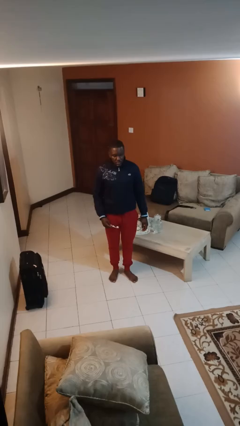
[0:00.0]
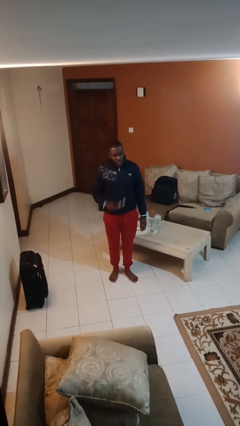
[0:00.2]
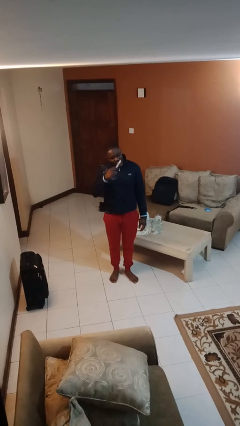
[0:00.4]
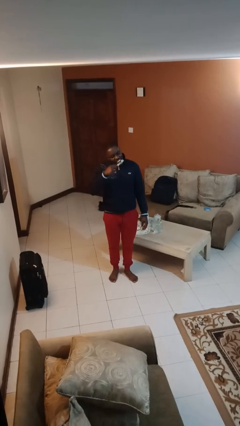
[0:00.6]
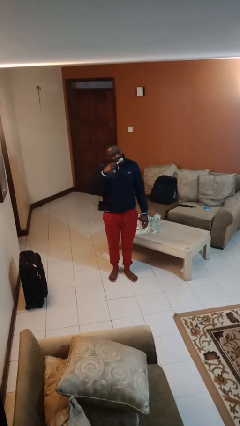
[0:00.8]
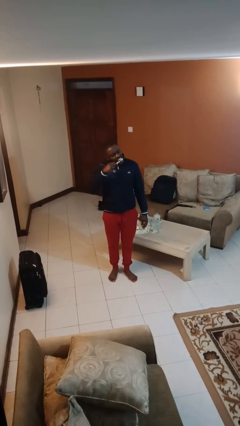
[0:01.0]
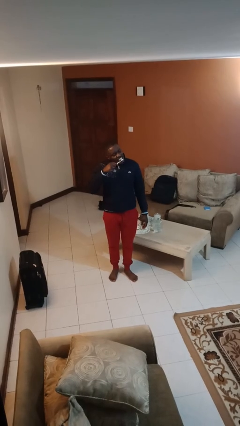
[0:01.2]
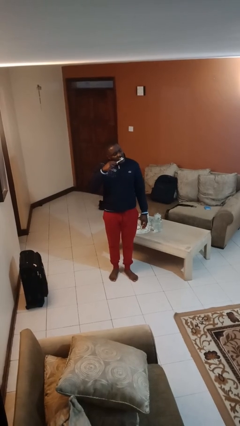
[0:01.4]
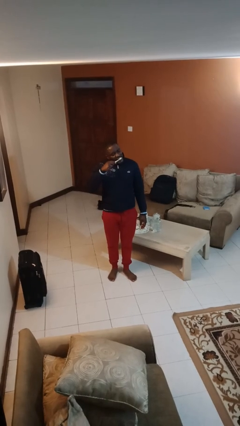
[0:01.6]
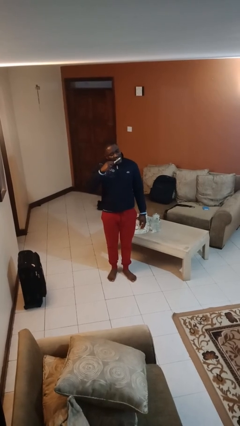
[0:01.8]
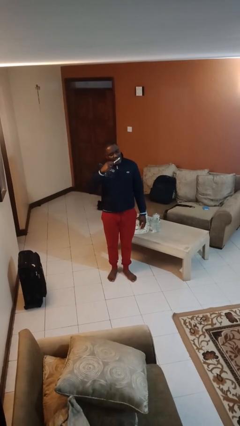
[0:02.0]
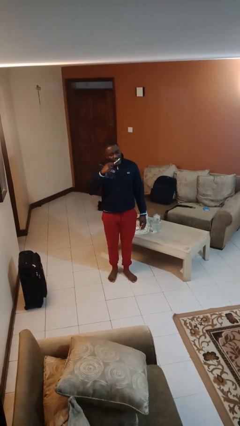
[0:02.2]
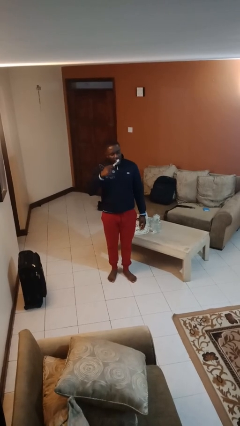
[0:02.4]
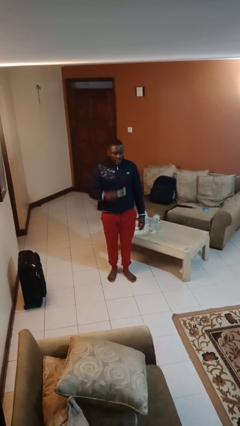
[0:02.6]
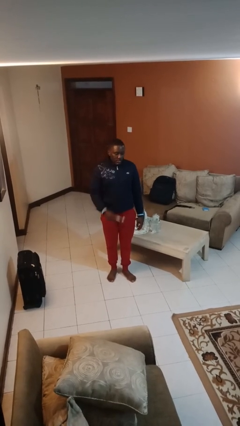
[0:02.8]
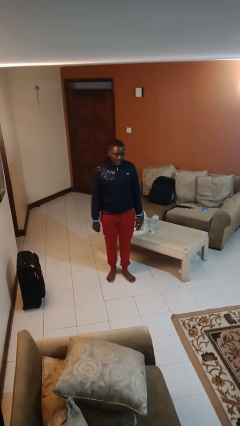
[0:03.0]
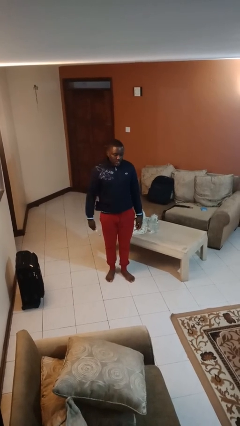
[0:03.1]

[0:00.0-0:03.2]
person brushes teeth

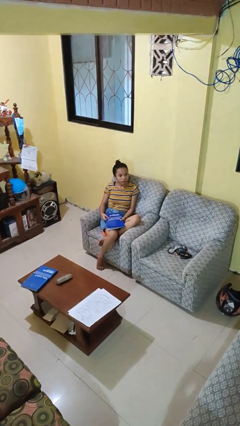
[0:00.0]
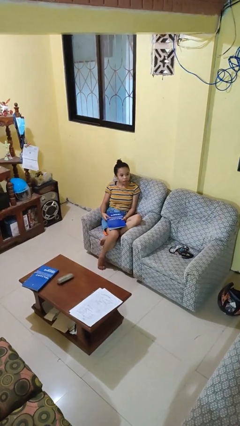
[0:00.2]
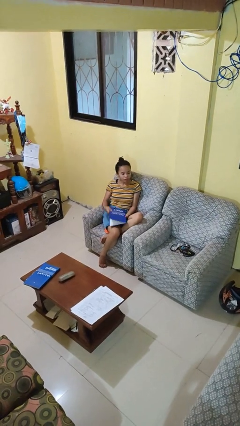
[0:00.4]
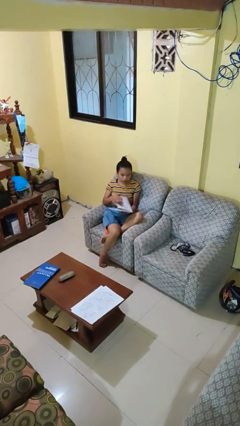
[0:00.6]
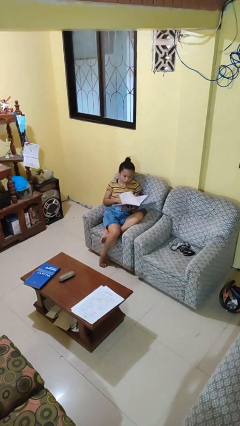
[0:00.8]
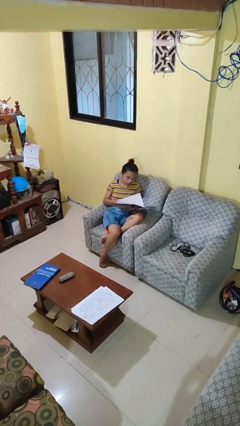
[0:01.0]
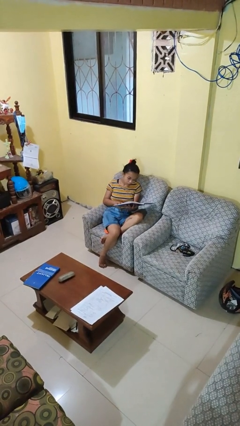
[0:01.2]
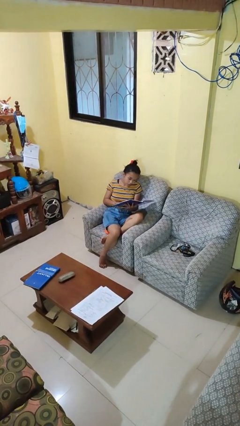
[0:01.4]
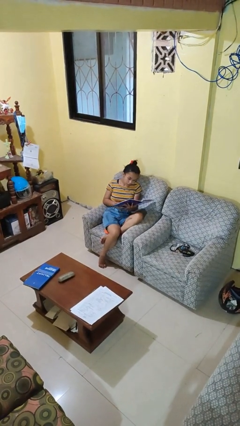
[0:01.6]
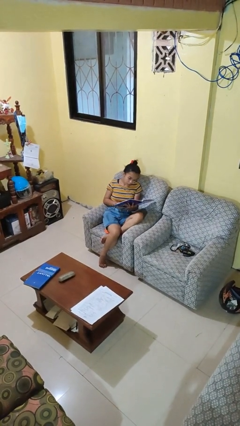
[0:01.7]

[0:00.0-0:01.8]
person reads book

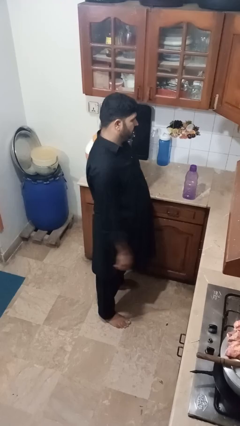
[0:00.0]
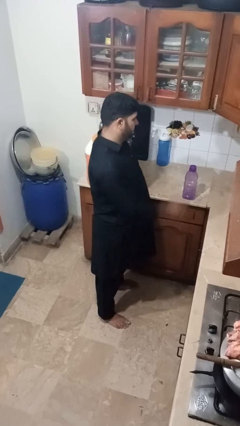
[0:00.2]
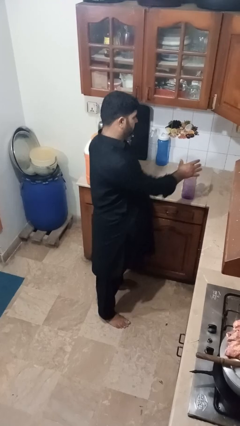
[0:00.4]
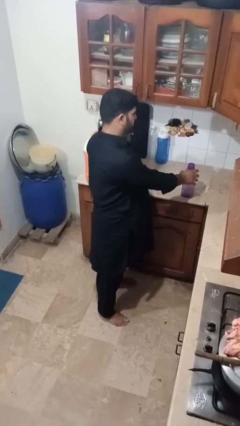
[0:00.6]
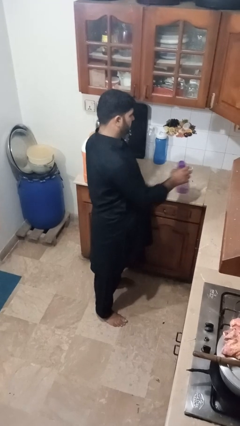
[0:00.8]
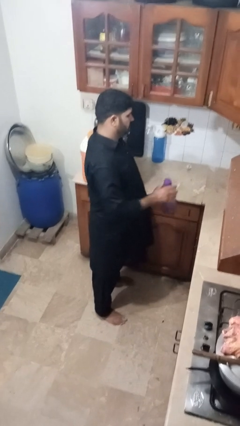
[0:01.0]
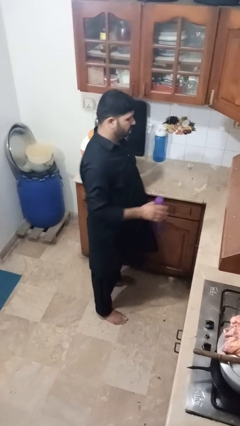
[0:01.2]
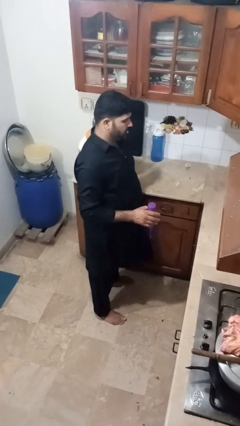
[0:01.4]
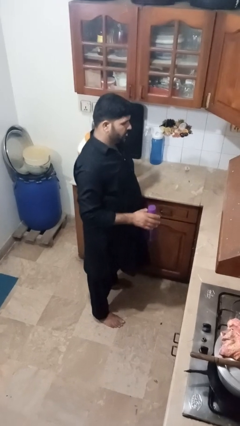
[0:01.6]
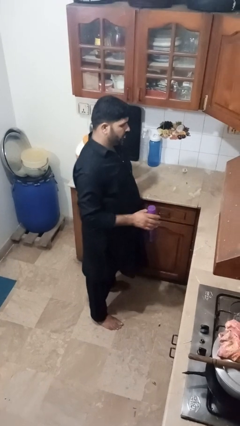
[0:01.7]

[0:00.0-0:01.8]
person picks up object from countertop

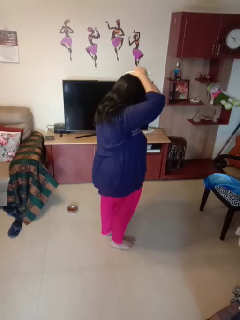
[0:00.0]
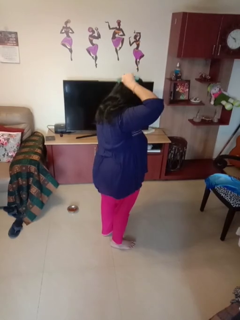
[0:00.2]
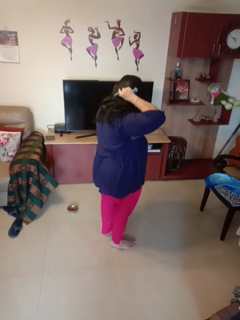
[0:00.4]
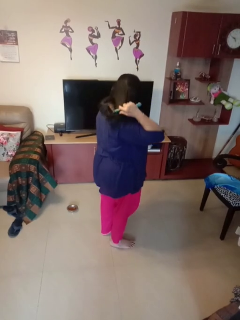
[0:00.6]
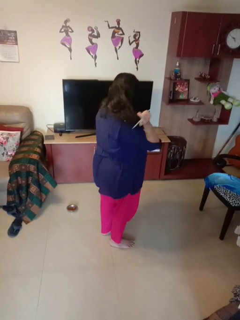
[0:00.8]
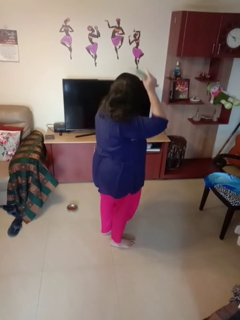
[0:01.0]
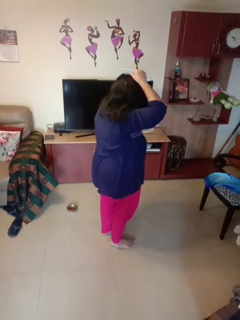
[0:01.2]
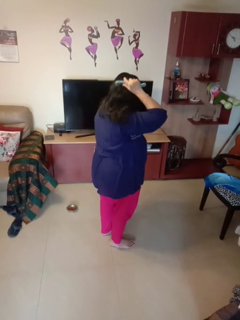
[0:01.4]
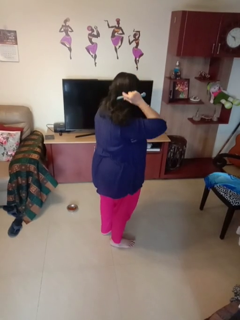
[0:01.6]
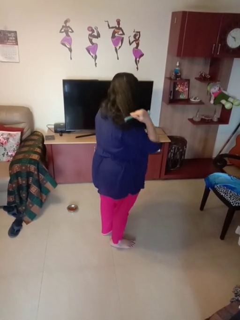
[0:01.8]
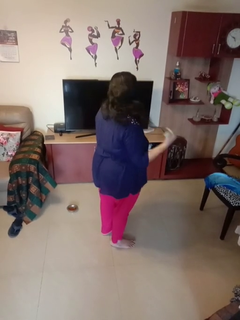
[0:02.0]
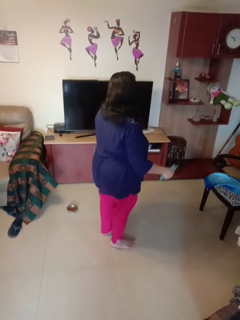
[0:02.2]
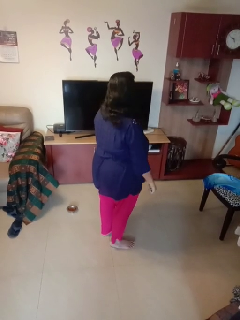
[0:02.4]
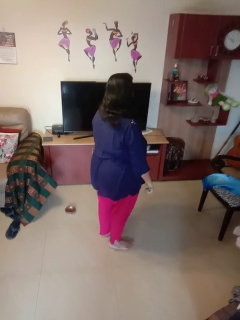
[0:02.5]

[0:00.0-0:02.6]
person brushes hair

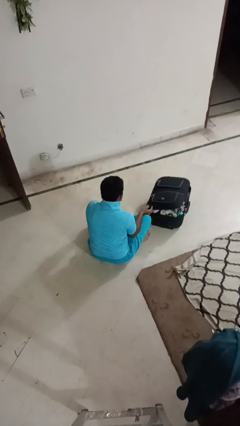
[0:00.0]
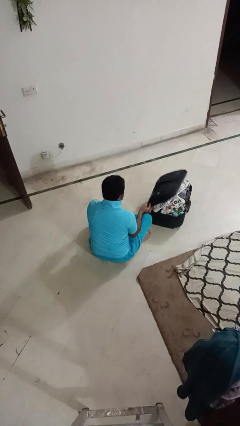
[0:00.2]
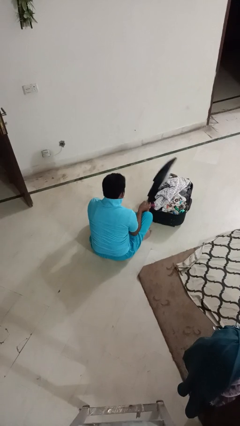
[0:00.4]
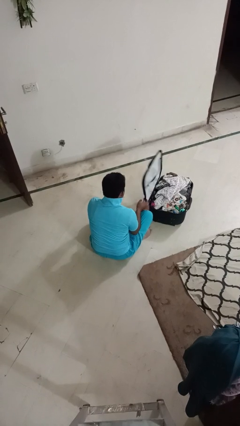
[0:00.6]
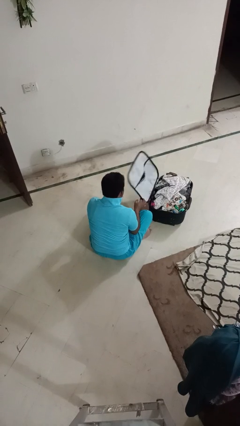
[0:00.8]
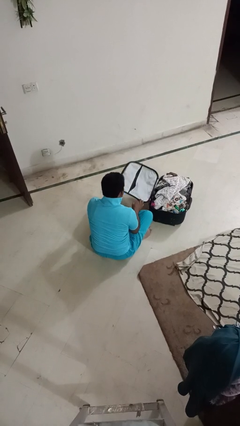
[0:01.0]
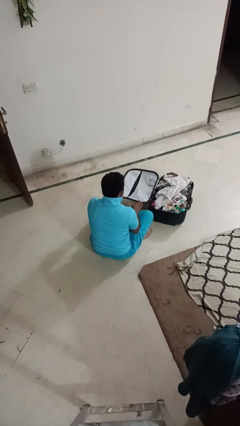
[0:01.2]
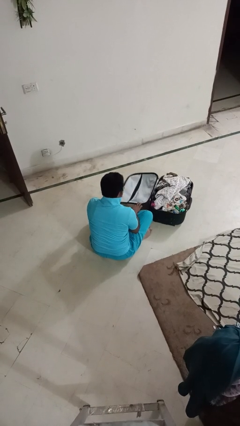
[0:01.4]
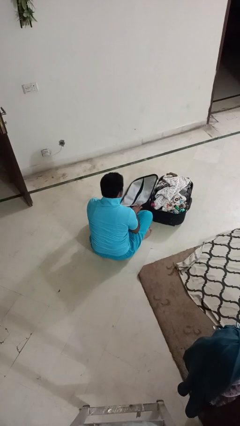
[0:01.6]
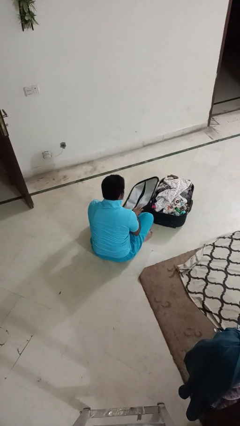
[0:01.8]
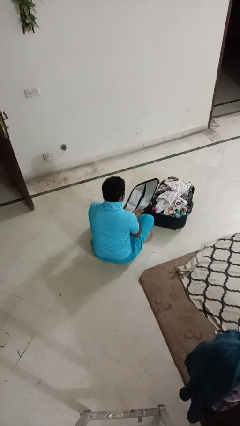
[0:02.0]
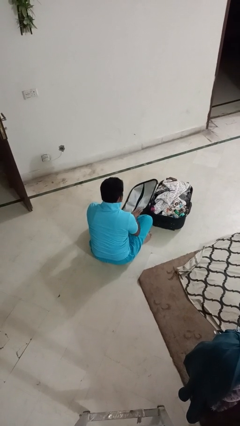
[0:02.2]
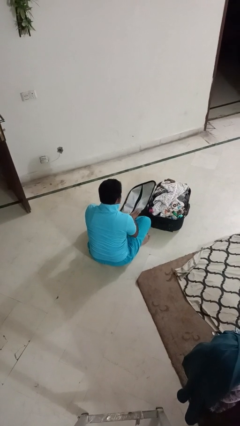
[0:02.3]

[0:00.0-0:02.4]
person opens suitcase

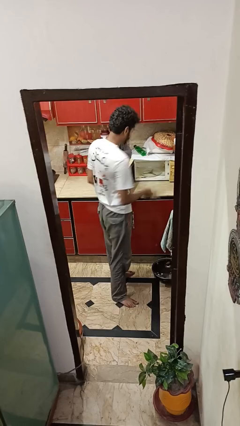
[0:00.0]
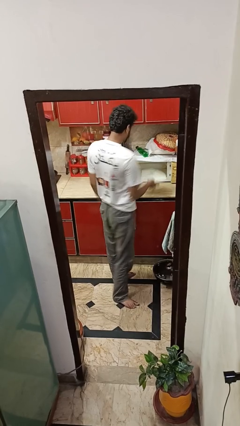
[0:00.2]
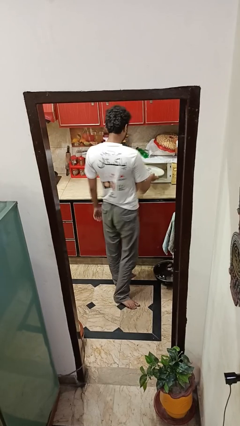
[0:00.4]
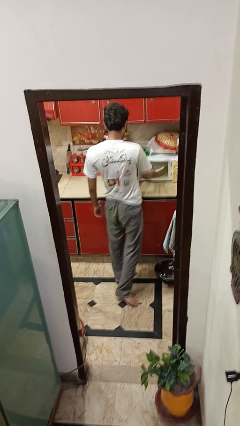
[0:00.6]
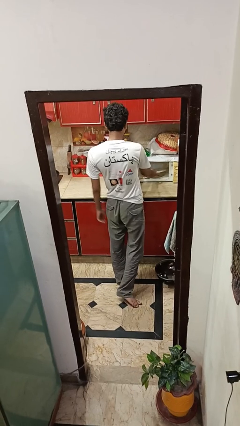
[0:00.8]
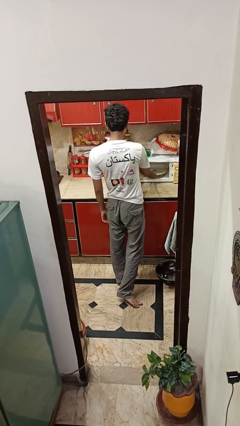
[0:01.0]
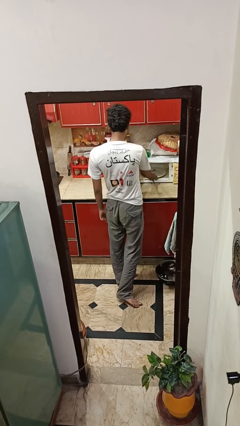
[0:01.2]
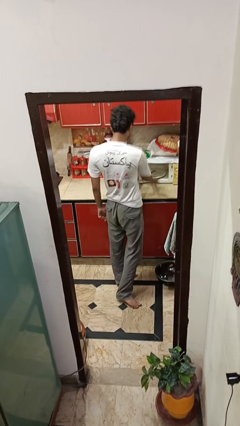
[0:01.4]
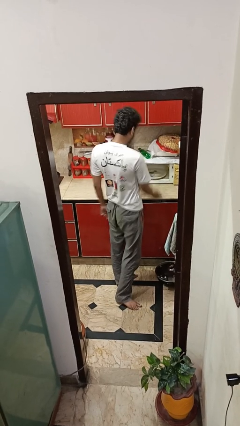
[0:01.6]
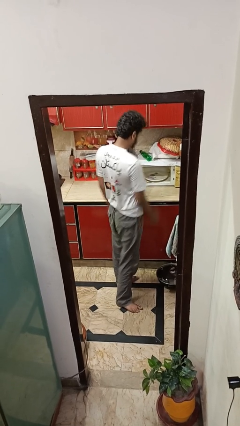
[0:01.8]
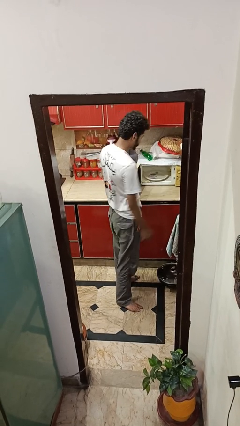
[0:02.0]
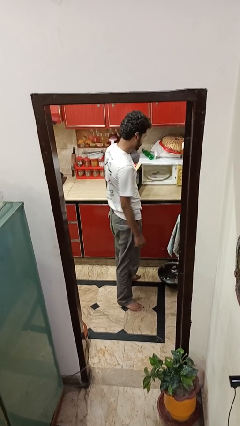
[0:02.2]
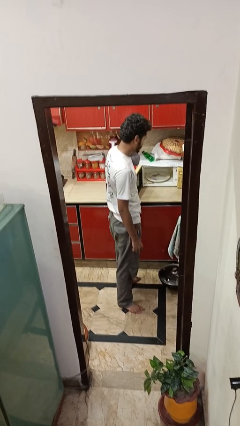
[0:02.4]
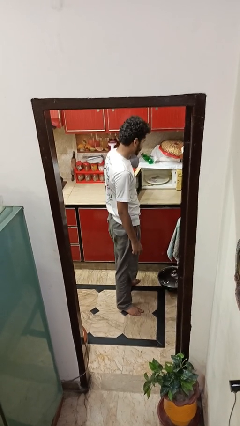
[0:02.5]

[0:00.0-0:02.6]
person puts object into oven

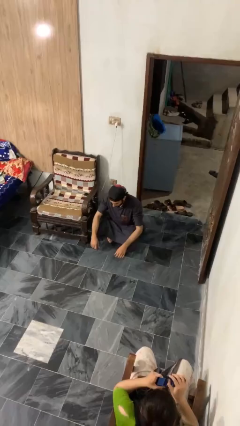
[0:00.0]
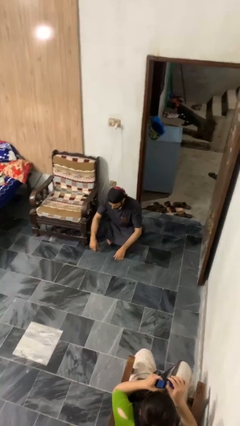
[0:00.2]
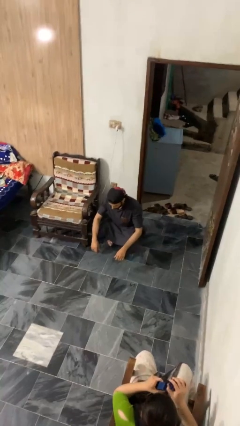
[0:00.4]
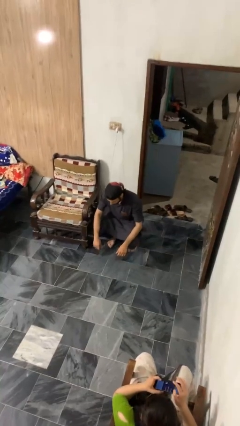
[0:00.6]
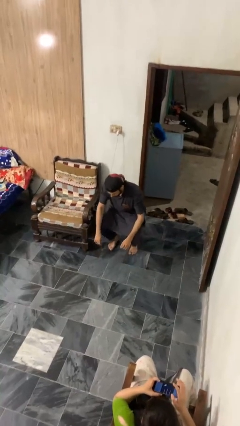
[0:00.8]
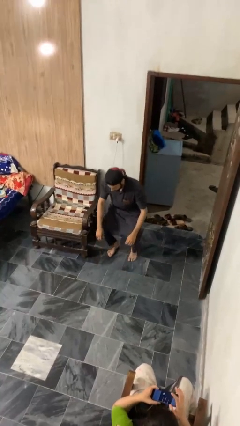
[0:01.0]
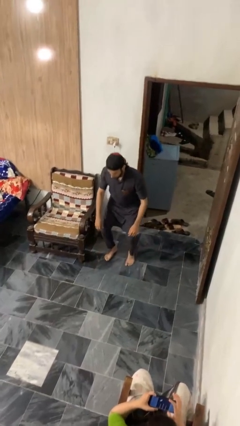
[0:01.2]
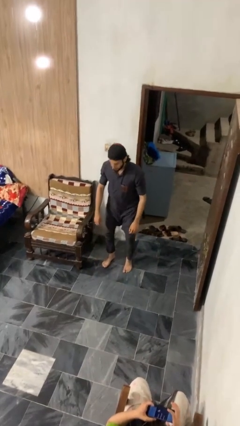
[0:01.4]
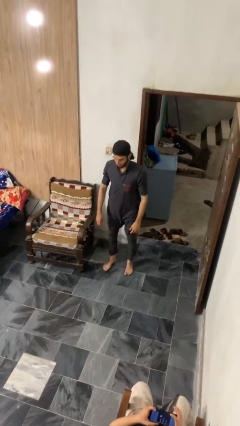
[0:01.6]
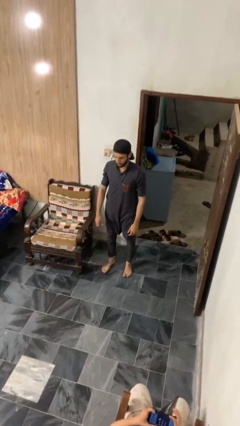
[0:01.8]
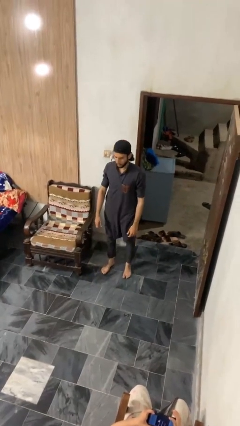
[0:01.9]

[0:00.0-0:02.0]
person stands up

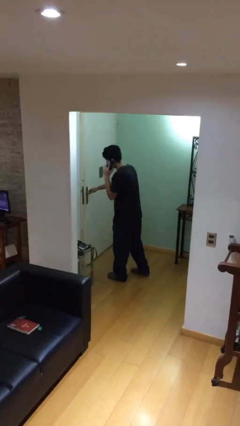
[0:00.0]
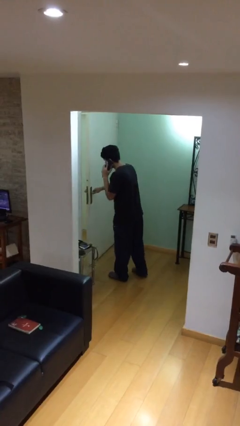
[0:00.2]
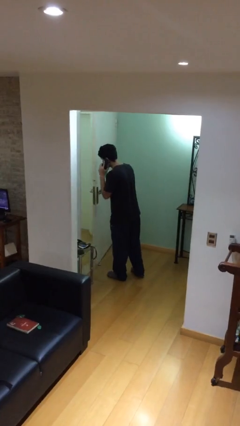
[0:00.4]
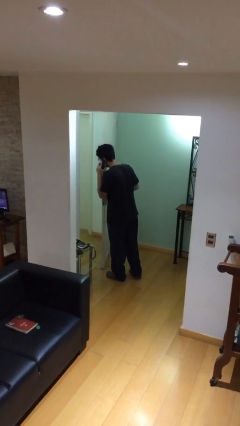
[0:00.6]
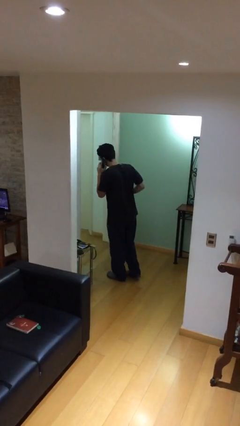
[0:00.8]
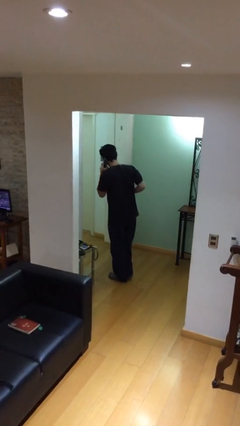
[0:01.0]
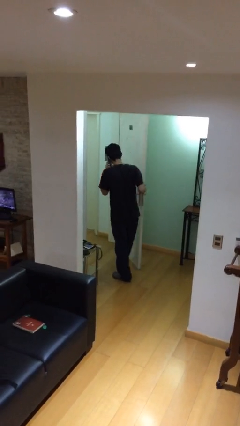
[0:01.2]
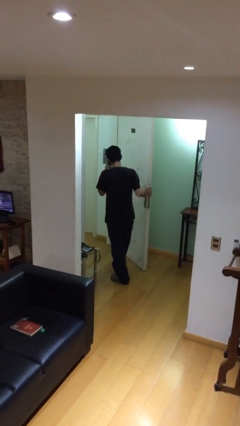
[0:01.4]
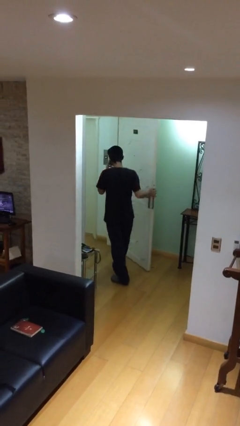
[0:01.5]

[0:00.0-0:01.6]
person opens facility door
